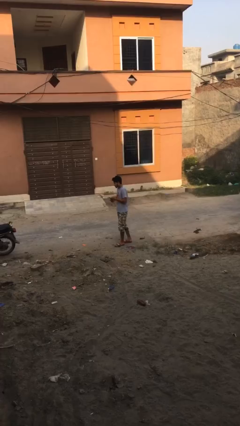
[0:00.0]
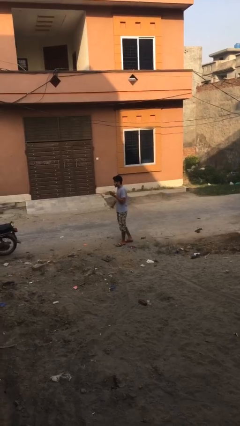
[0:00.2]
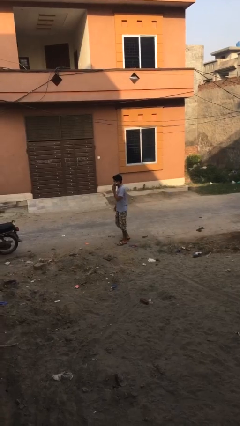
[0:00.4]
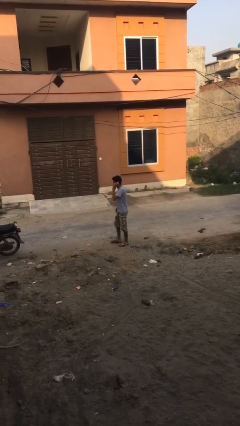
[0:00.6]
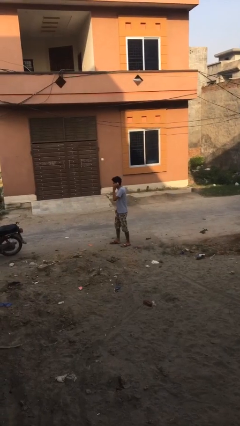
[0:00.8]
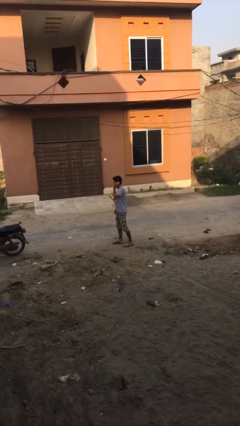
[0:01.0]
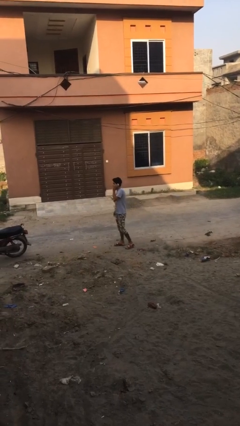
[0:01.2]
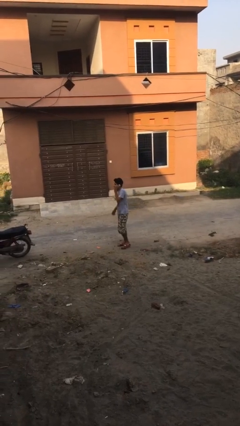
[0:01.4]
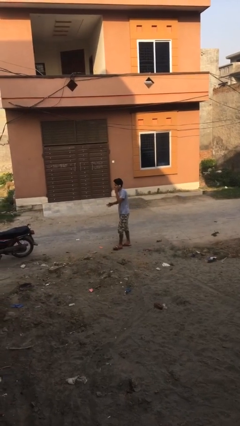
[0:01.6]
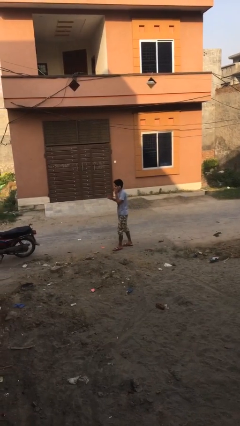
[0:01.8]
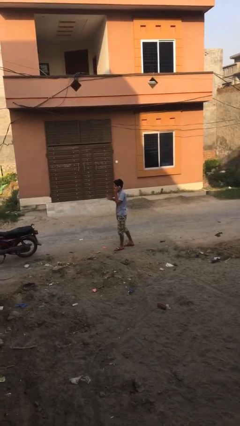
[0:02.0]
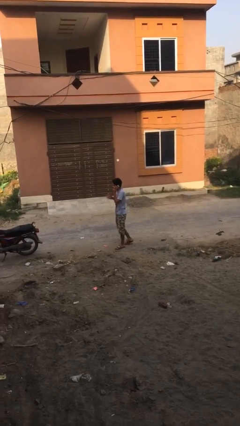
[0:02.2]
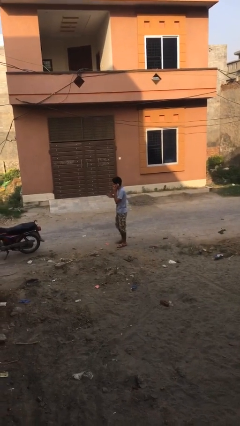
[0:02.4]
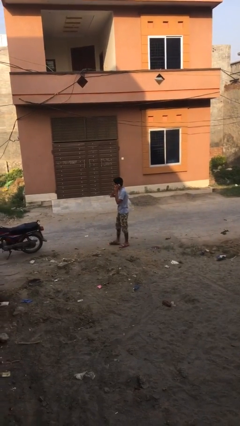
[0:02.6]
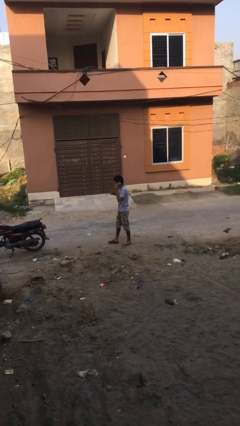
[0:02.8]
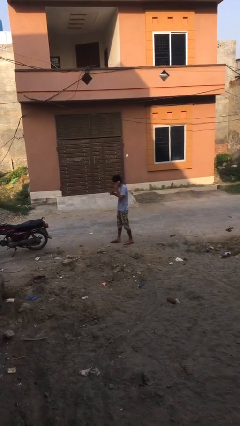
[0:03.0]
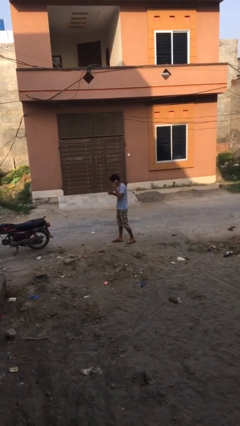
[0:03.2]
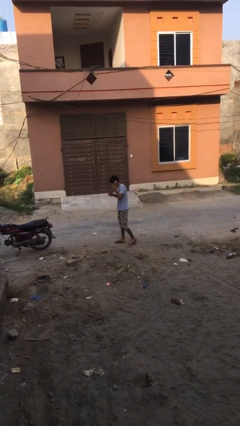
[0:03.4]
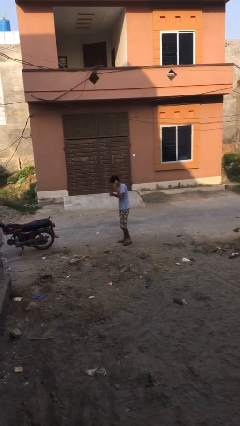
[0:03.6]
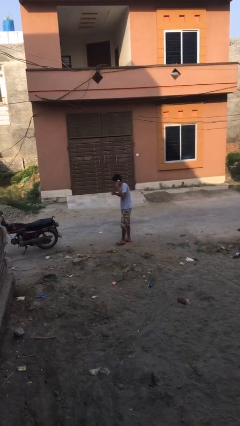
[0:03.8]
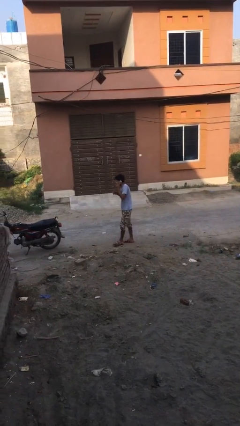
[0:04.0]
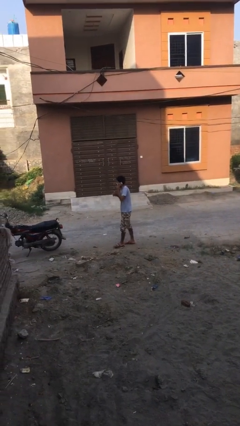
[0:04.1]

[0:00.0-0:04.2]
person talks on phone

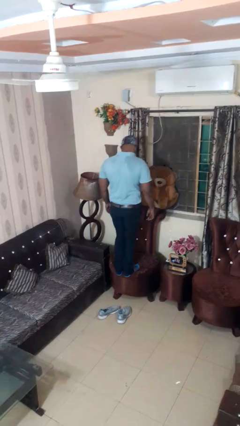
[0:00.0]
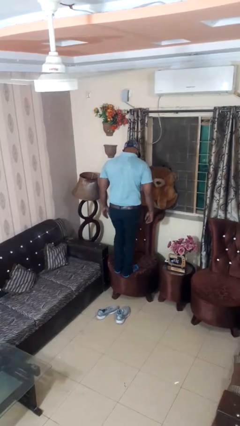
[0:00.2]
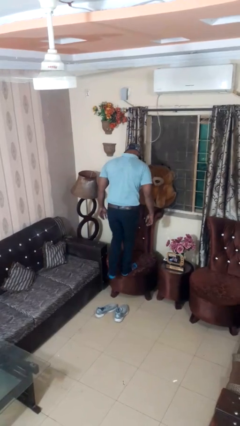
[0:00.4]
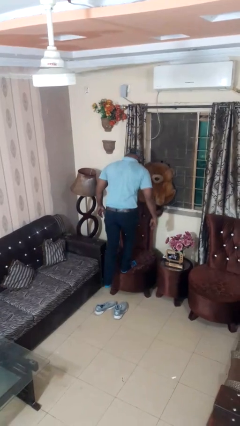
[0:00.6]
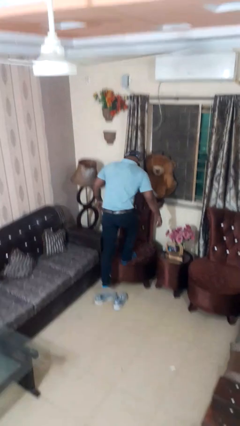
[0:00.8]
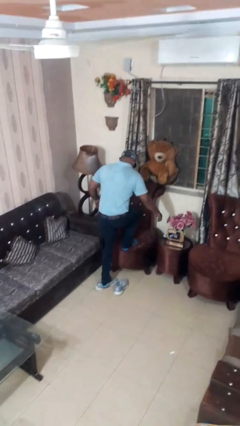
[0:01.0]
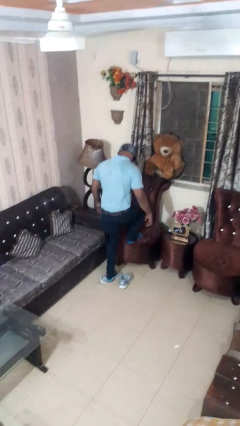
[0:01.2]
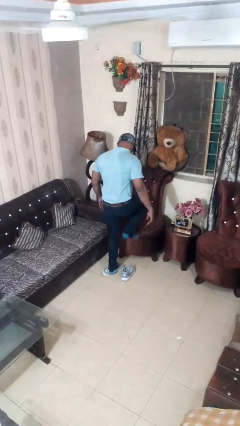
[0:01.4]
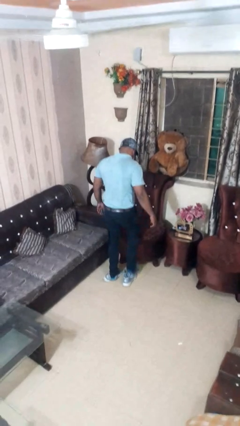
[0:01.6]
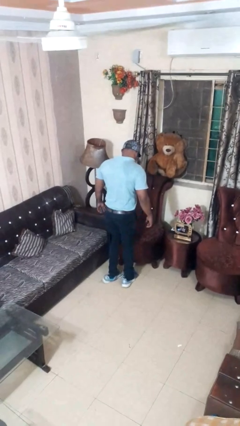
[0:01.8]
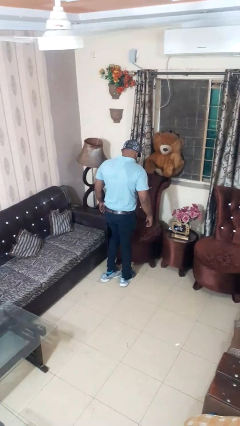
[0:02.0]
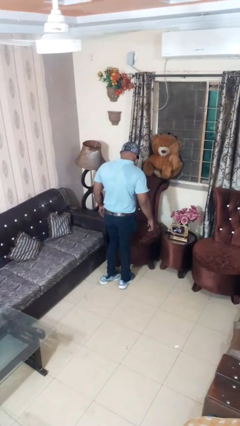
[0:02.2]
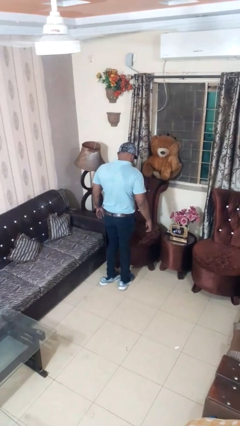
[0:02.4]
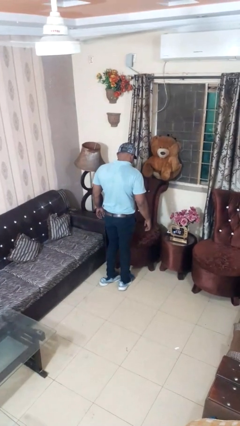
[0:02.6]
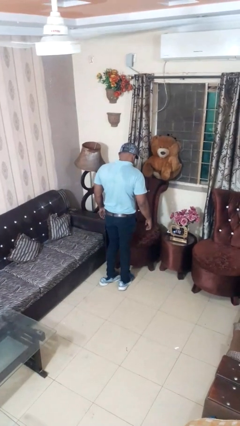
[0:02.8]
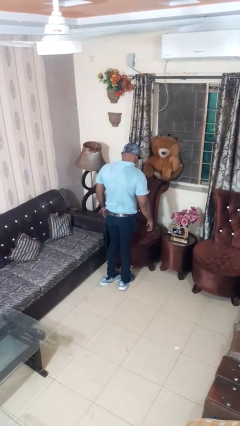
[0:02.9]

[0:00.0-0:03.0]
person climbs off chair

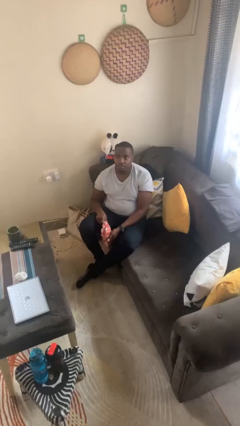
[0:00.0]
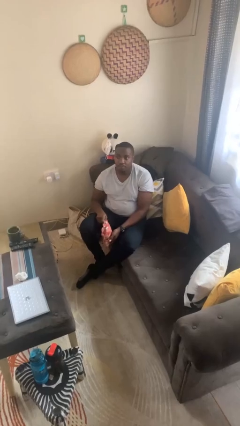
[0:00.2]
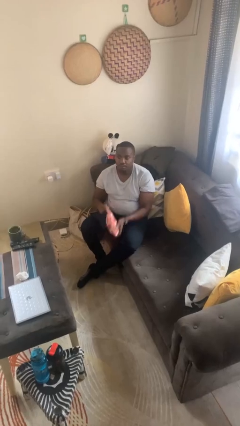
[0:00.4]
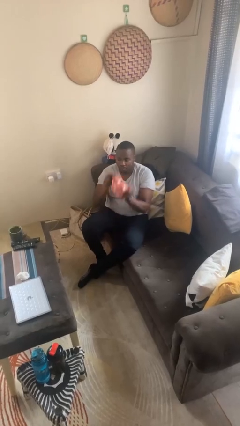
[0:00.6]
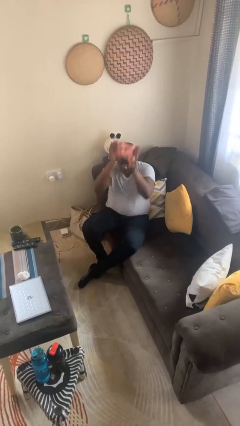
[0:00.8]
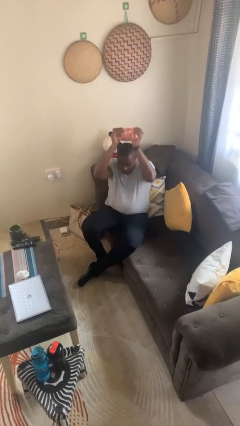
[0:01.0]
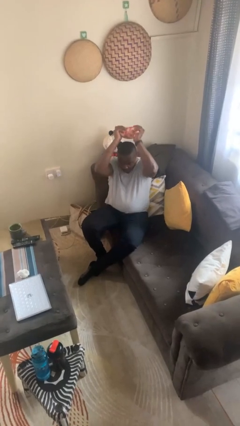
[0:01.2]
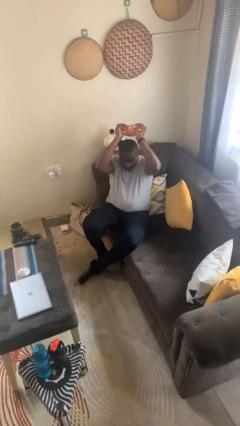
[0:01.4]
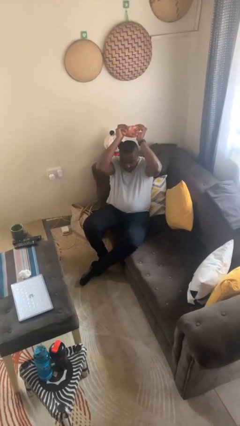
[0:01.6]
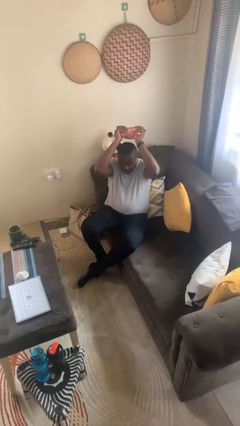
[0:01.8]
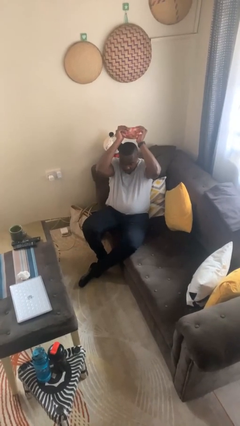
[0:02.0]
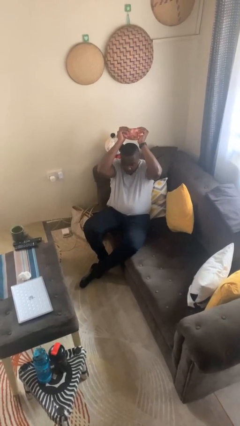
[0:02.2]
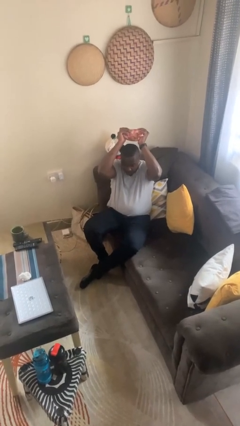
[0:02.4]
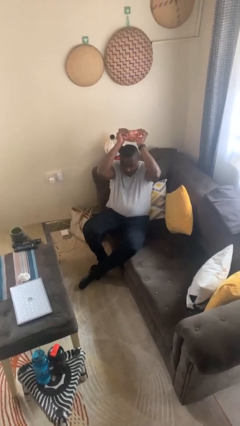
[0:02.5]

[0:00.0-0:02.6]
person holds object above head

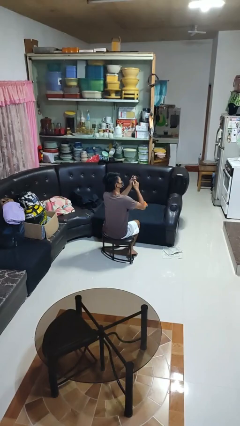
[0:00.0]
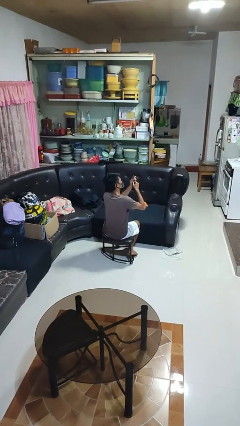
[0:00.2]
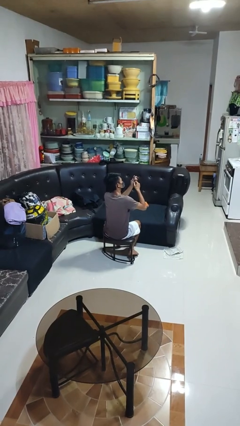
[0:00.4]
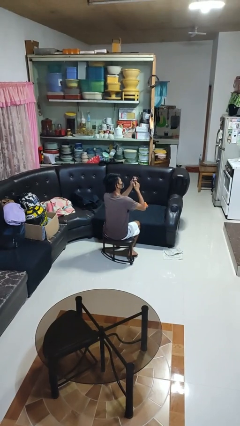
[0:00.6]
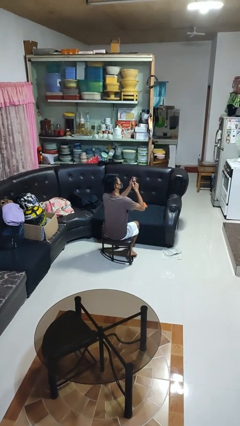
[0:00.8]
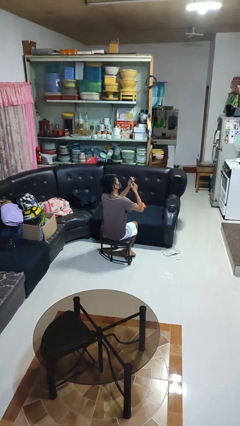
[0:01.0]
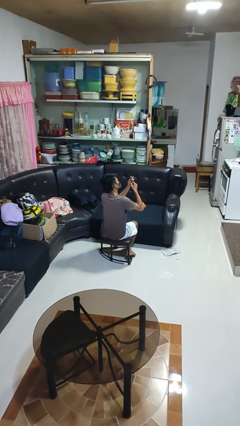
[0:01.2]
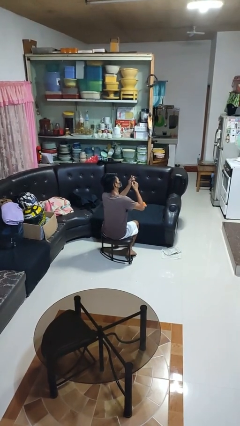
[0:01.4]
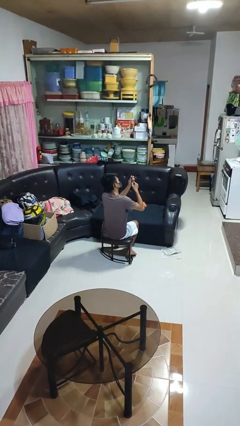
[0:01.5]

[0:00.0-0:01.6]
person files fingernails

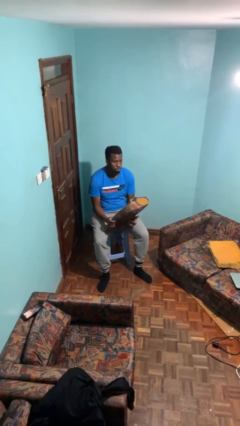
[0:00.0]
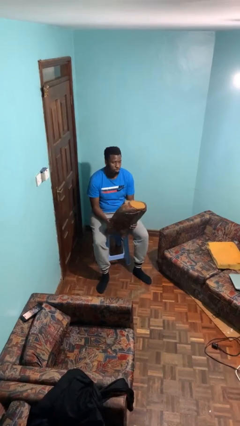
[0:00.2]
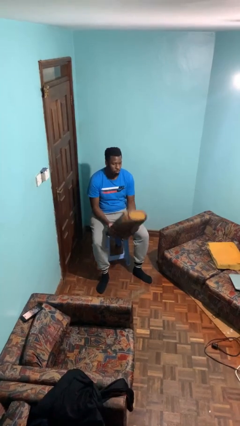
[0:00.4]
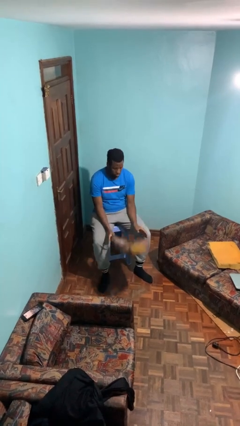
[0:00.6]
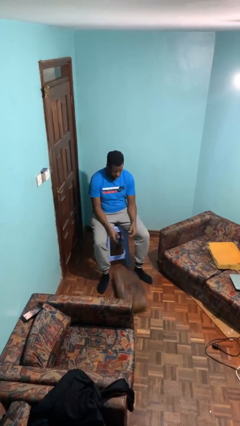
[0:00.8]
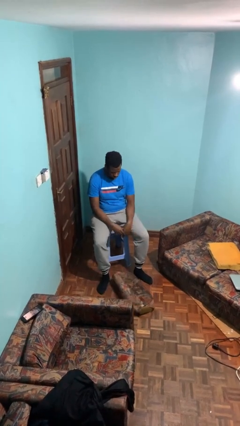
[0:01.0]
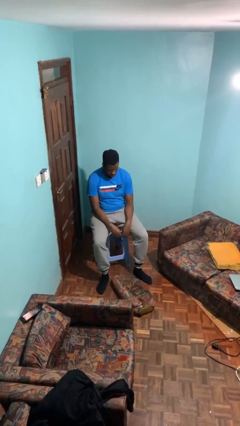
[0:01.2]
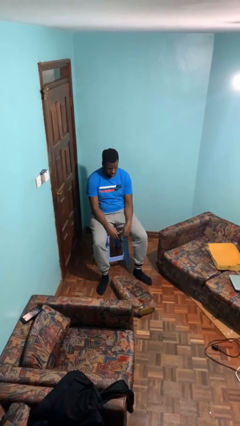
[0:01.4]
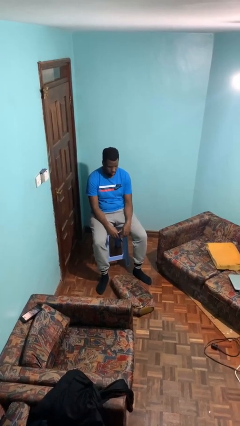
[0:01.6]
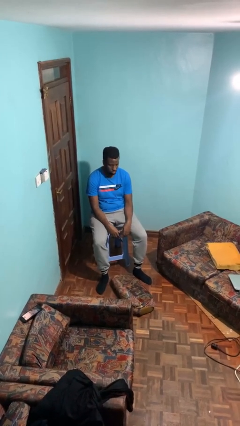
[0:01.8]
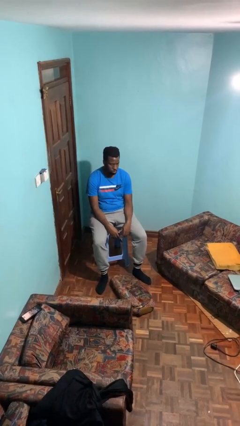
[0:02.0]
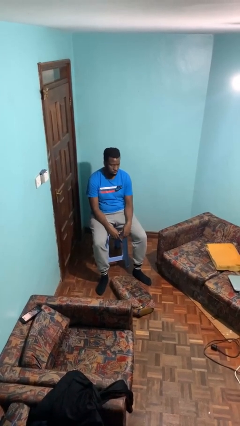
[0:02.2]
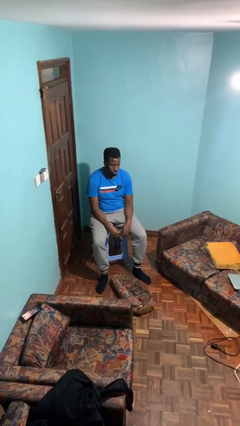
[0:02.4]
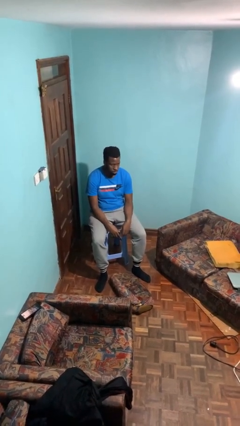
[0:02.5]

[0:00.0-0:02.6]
person drops object

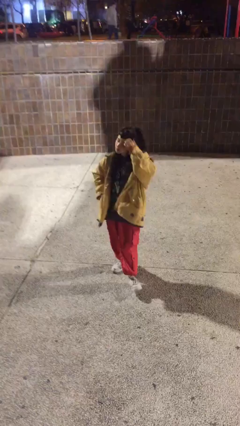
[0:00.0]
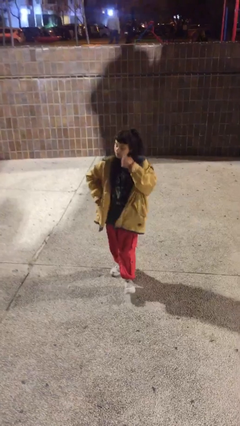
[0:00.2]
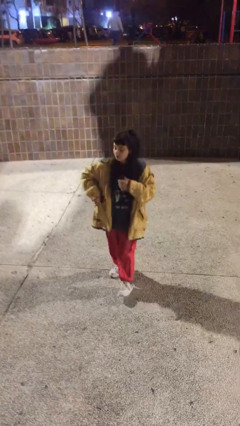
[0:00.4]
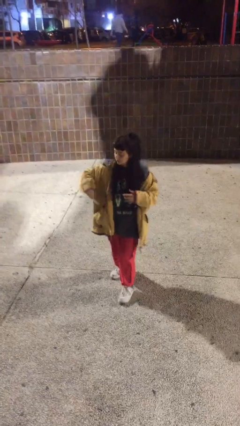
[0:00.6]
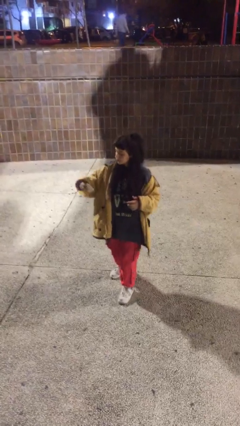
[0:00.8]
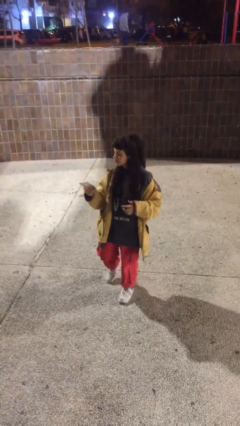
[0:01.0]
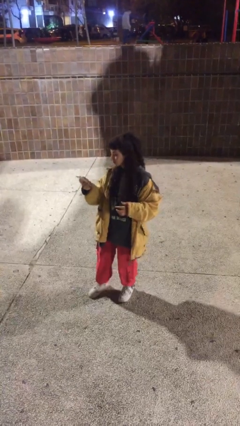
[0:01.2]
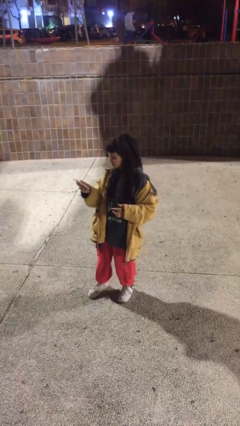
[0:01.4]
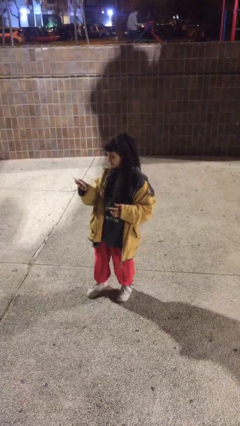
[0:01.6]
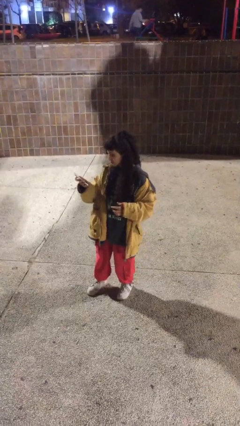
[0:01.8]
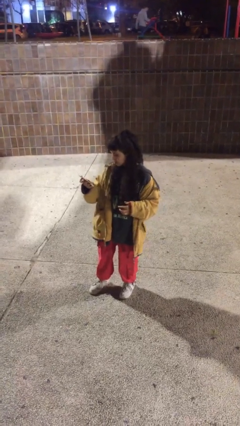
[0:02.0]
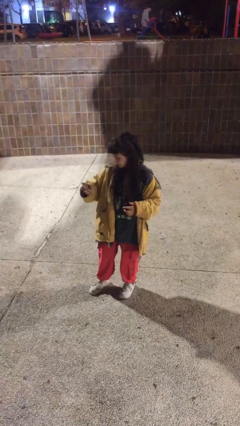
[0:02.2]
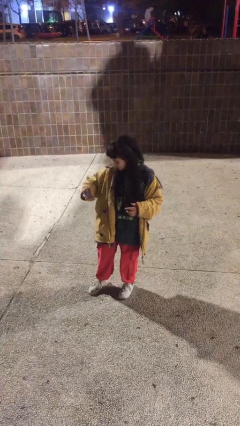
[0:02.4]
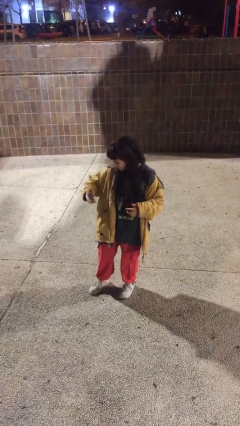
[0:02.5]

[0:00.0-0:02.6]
person takes phone from pocket

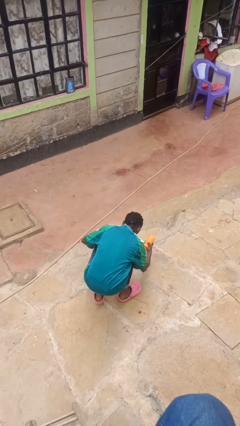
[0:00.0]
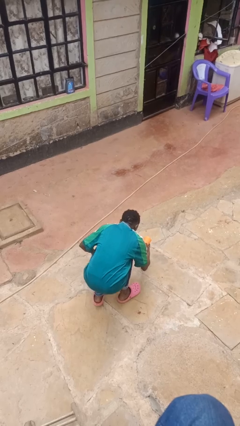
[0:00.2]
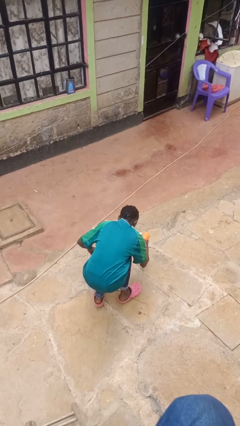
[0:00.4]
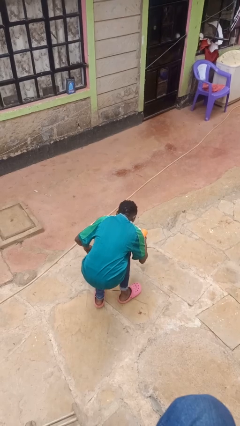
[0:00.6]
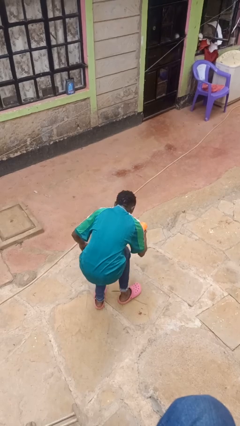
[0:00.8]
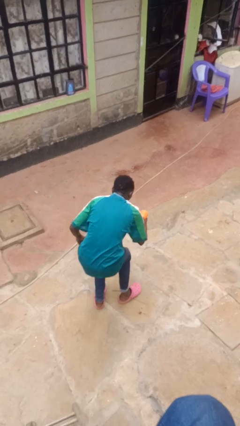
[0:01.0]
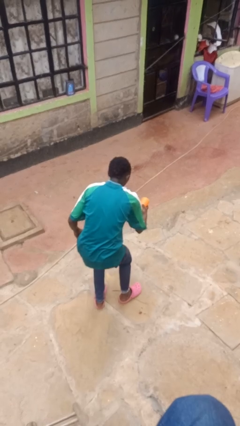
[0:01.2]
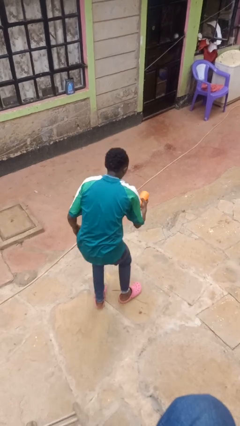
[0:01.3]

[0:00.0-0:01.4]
person catches dropped object
